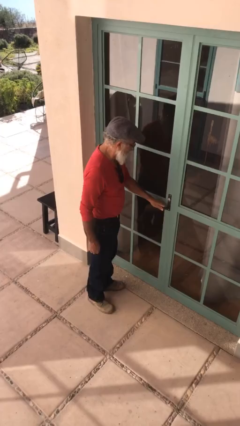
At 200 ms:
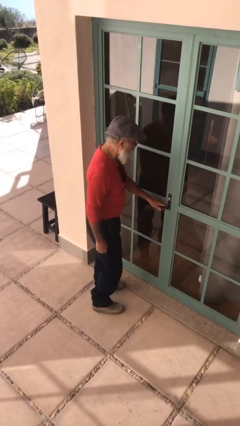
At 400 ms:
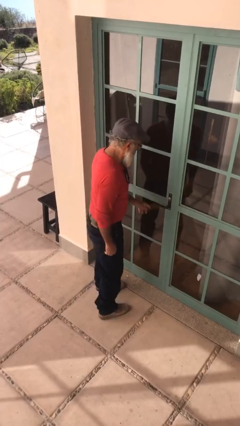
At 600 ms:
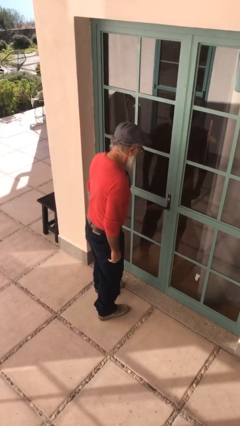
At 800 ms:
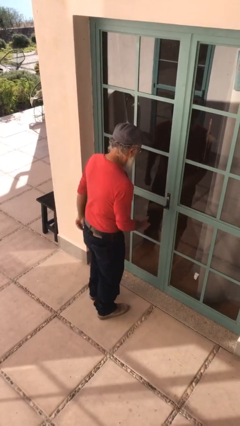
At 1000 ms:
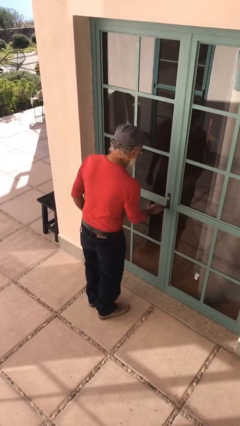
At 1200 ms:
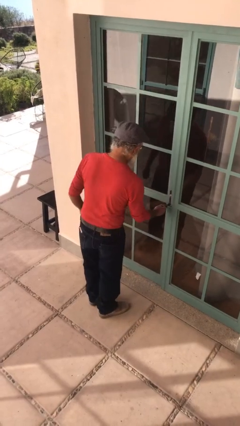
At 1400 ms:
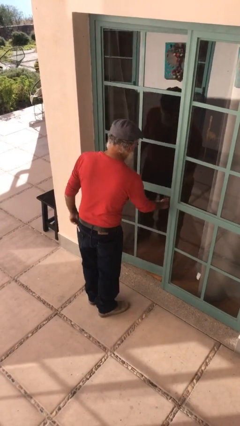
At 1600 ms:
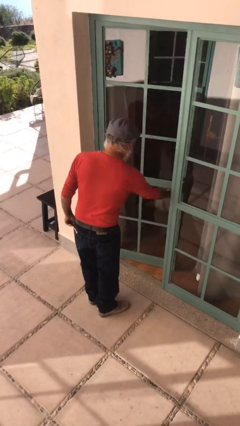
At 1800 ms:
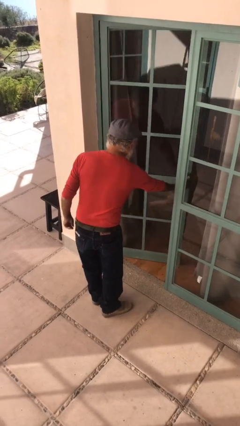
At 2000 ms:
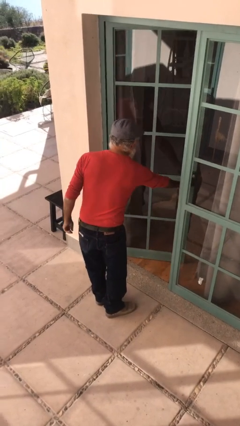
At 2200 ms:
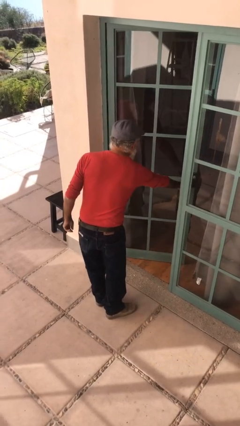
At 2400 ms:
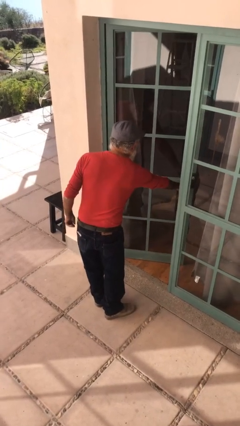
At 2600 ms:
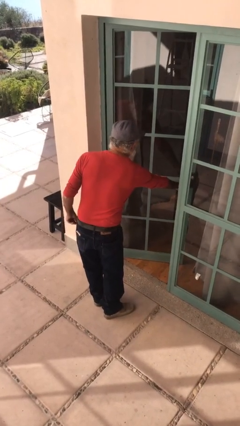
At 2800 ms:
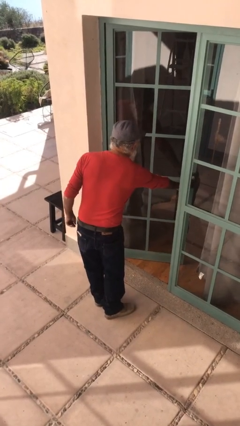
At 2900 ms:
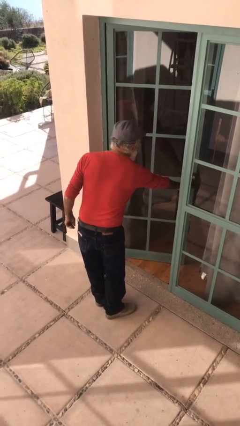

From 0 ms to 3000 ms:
person opens facility door

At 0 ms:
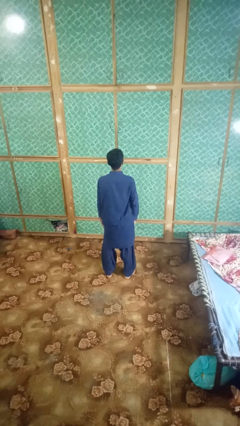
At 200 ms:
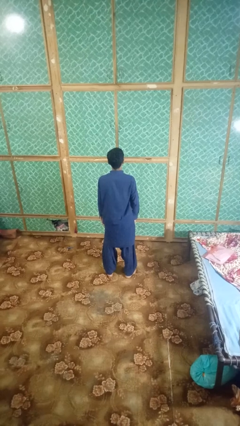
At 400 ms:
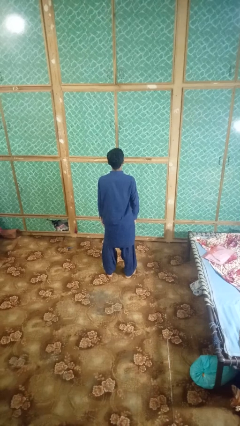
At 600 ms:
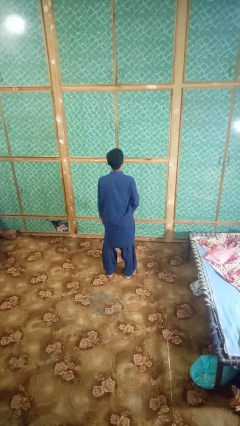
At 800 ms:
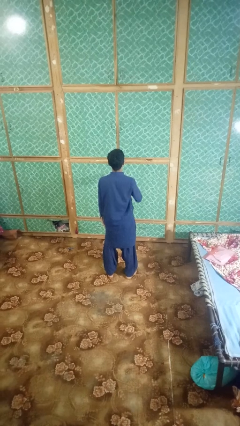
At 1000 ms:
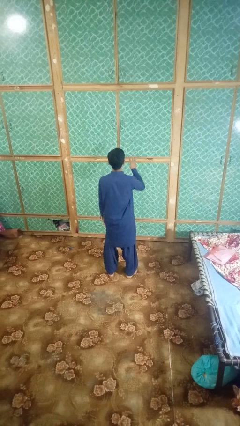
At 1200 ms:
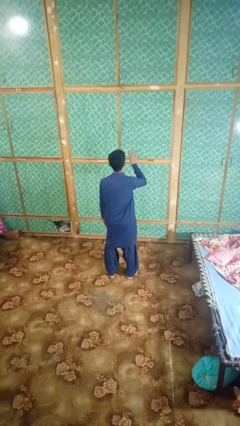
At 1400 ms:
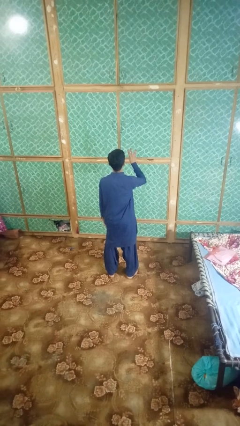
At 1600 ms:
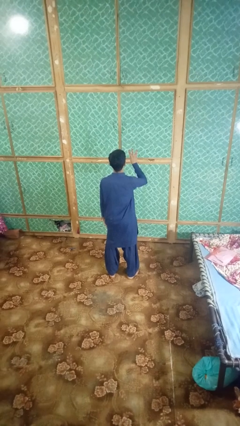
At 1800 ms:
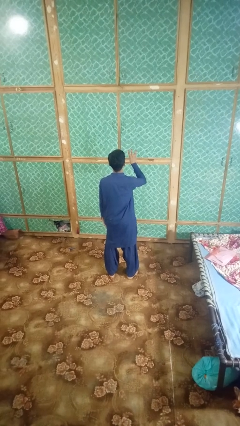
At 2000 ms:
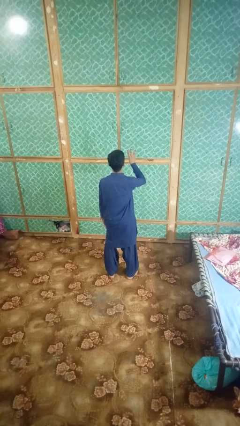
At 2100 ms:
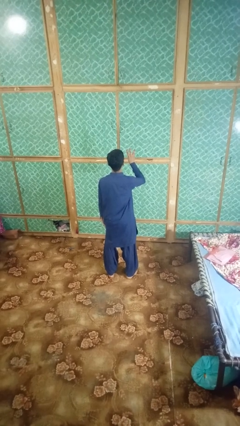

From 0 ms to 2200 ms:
person gestures number three

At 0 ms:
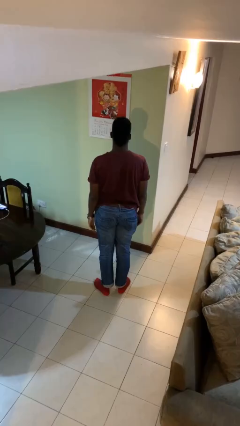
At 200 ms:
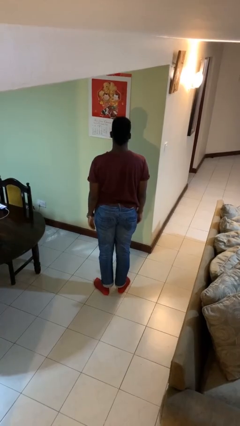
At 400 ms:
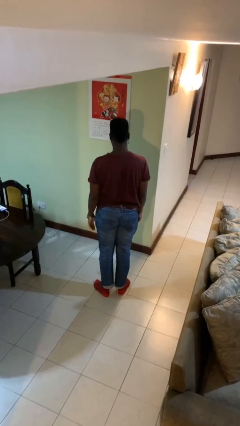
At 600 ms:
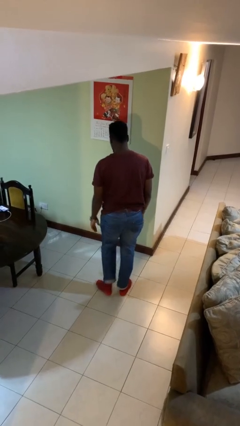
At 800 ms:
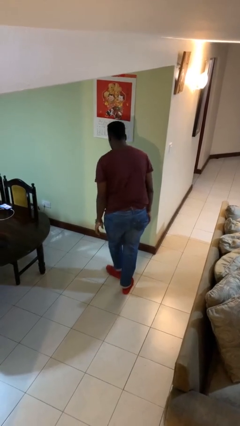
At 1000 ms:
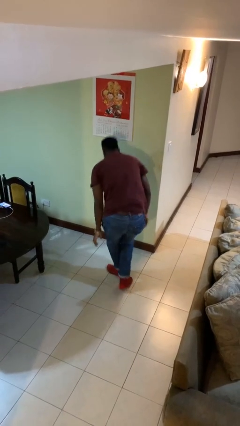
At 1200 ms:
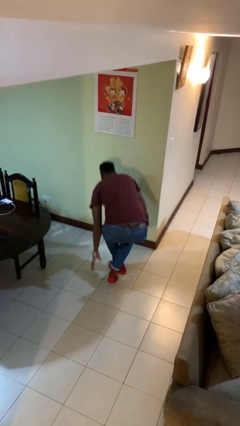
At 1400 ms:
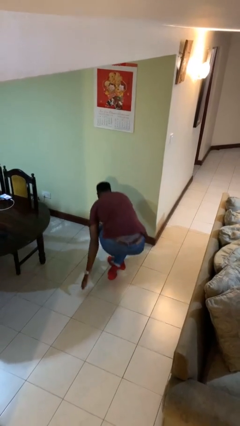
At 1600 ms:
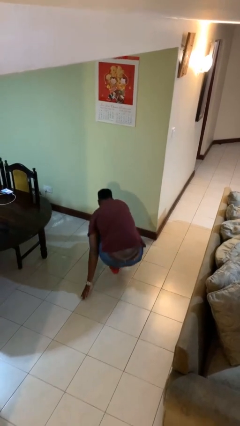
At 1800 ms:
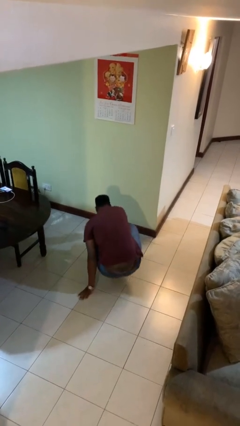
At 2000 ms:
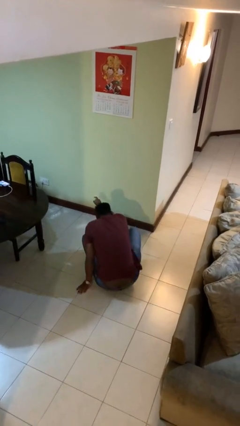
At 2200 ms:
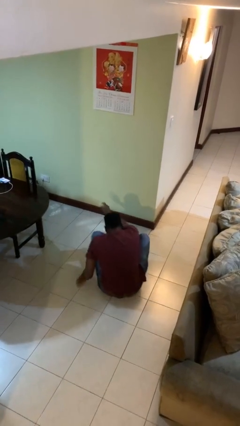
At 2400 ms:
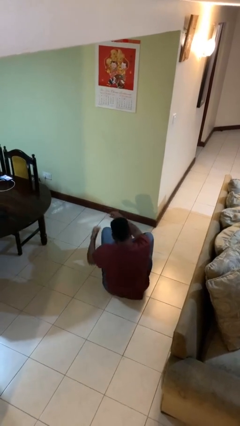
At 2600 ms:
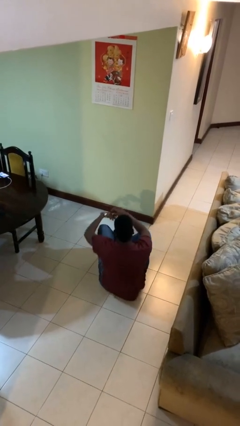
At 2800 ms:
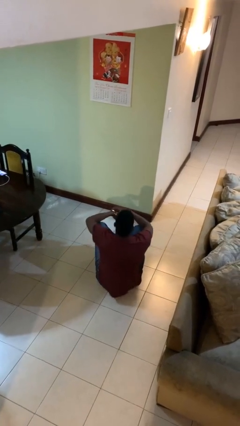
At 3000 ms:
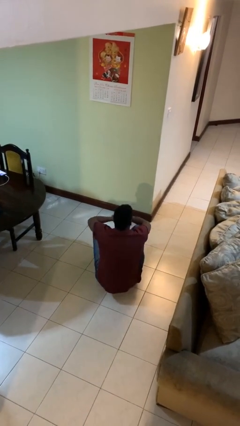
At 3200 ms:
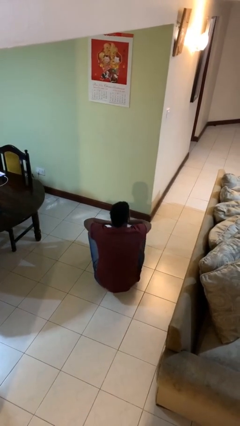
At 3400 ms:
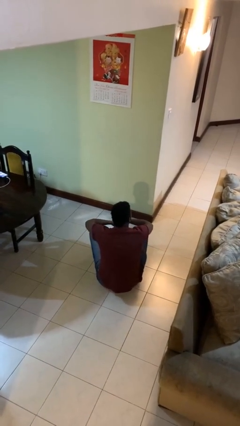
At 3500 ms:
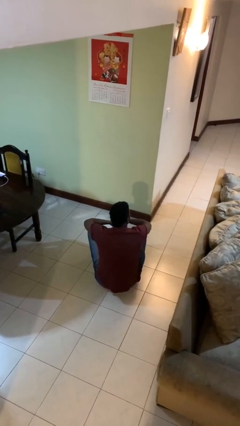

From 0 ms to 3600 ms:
person sits crisscross

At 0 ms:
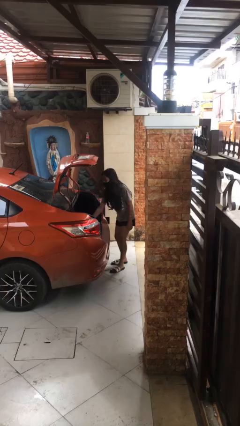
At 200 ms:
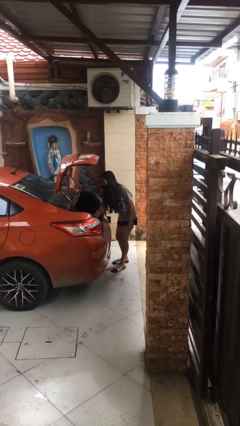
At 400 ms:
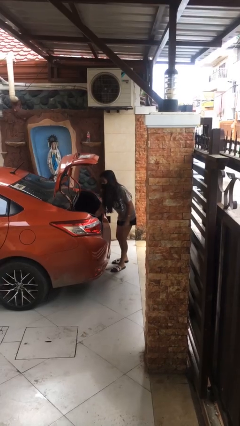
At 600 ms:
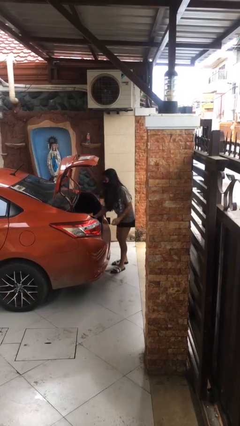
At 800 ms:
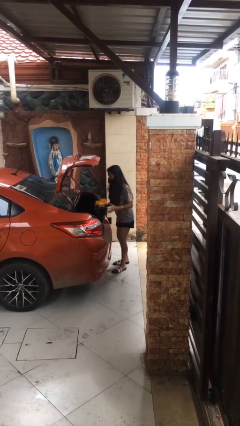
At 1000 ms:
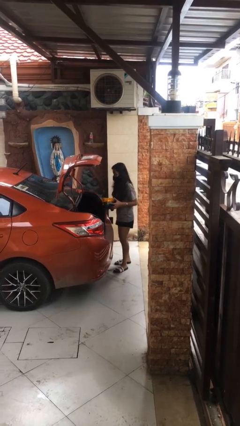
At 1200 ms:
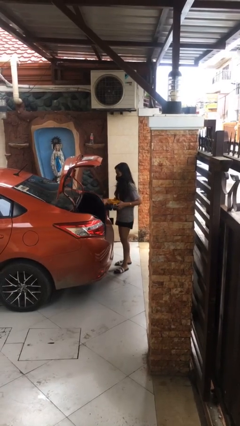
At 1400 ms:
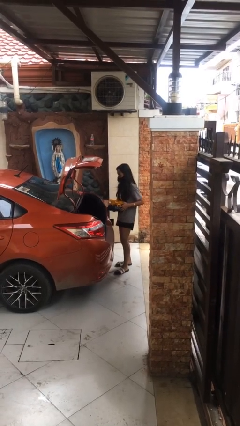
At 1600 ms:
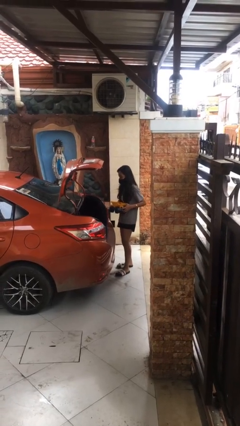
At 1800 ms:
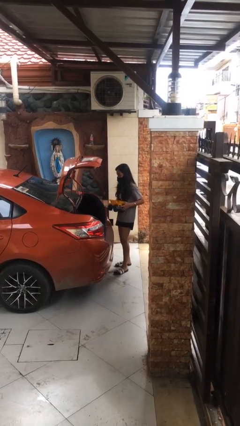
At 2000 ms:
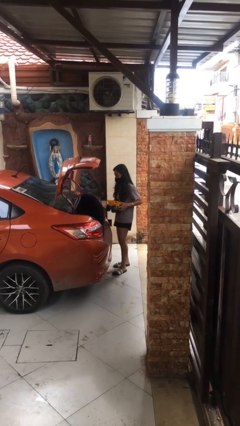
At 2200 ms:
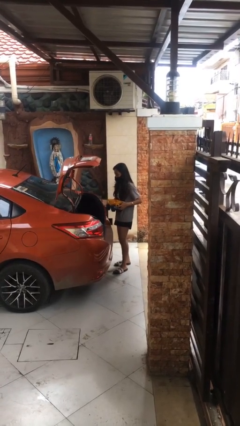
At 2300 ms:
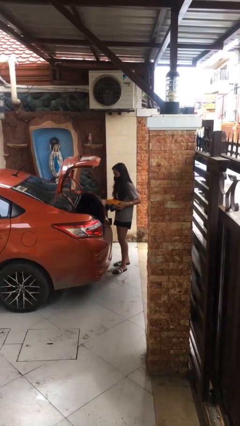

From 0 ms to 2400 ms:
person unloads car

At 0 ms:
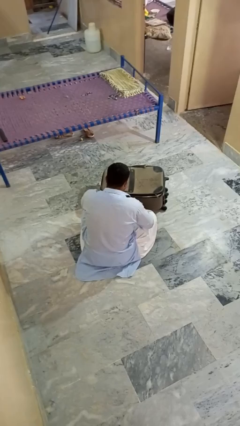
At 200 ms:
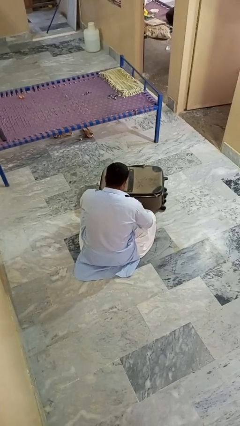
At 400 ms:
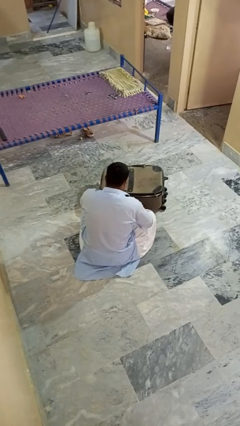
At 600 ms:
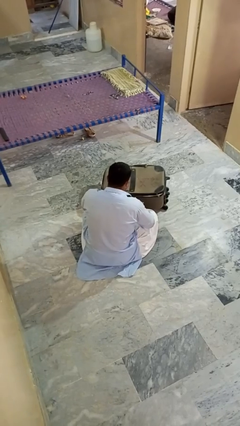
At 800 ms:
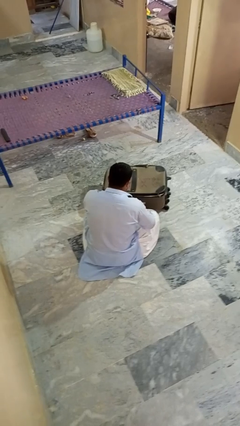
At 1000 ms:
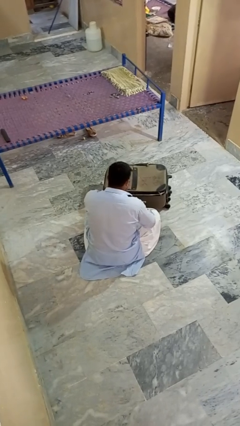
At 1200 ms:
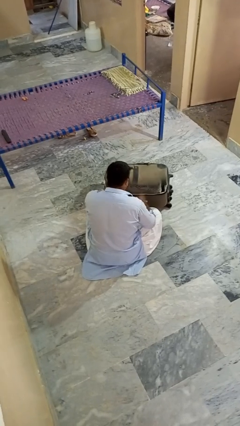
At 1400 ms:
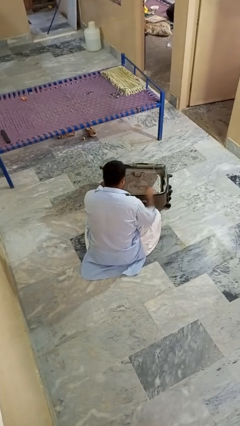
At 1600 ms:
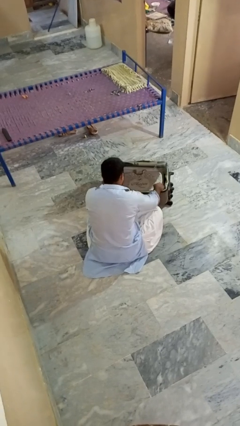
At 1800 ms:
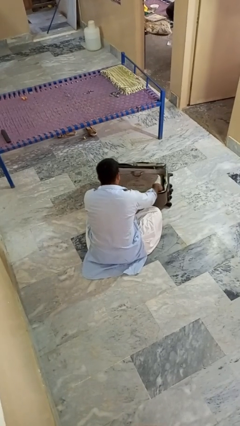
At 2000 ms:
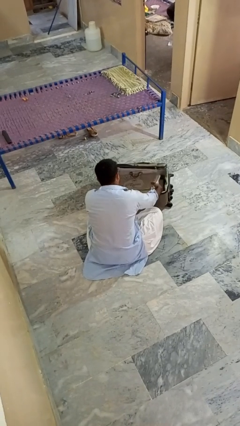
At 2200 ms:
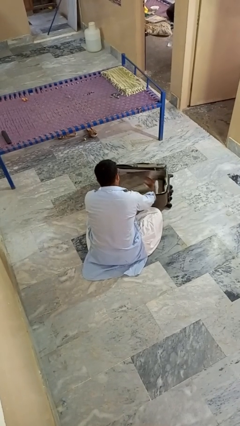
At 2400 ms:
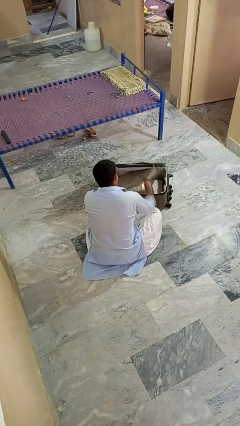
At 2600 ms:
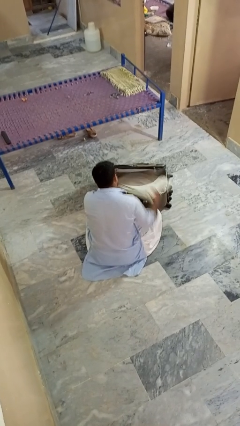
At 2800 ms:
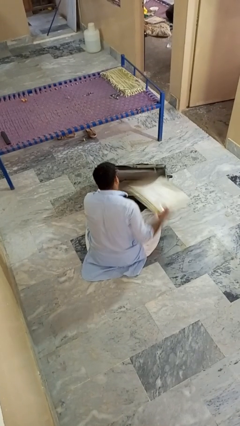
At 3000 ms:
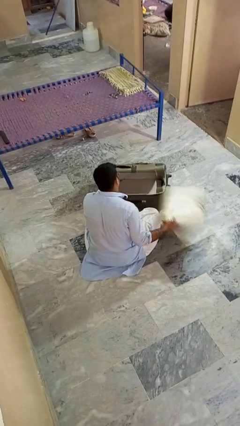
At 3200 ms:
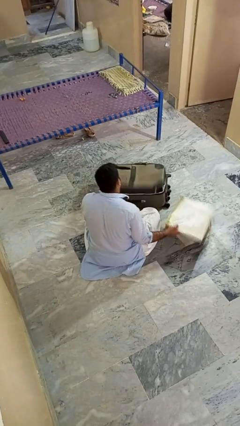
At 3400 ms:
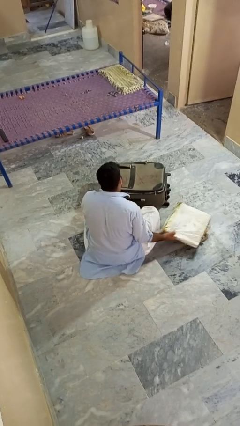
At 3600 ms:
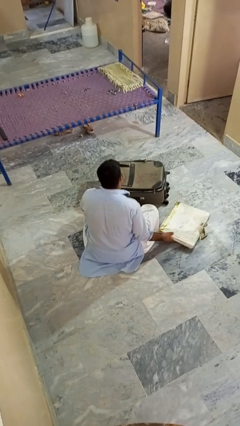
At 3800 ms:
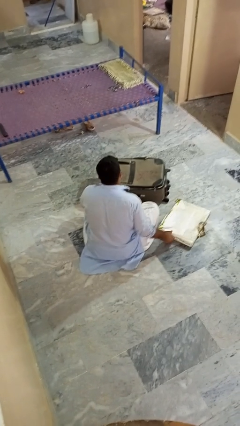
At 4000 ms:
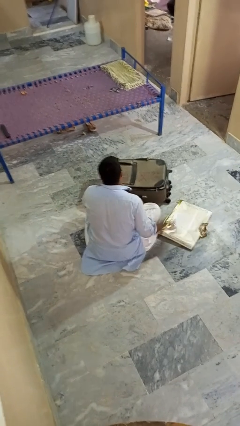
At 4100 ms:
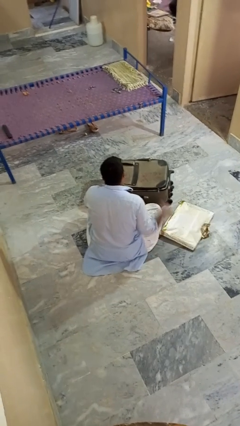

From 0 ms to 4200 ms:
person takes object from bag

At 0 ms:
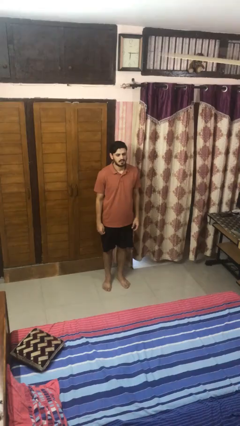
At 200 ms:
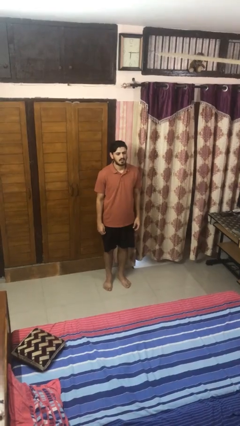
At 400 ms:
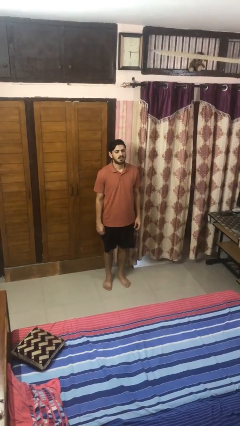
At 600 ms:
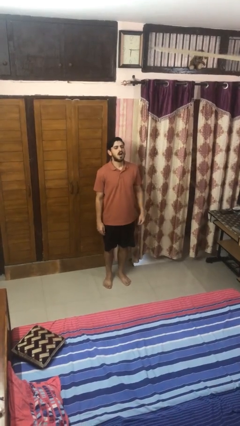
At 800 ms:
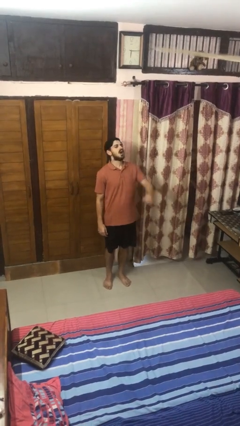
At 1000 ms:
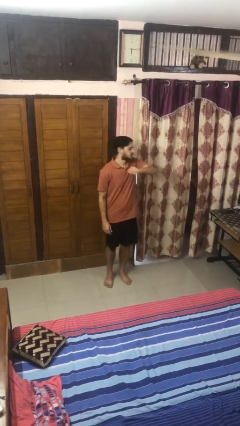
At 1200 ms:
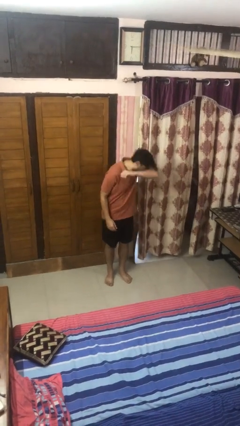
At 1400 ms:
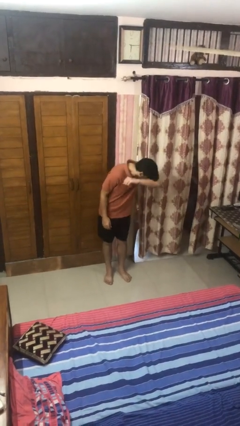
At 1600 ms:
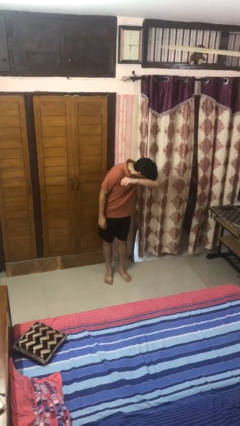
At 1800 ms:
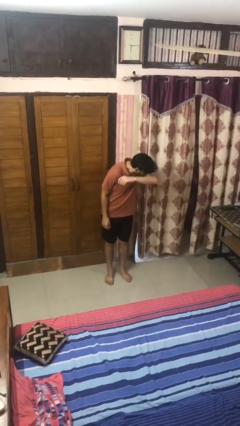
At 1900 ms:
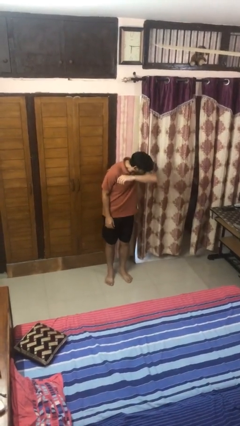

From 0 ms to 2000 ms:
person sneezes into arm
